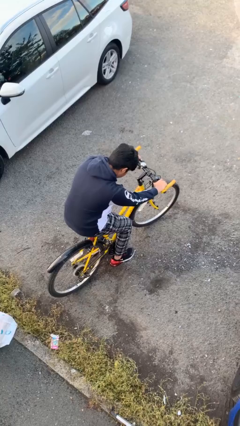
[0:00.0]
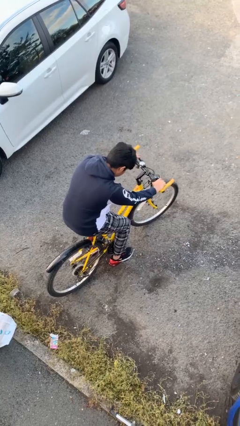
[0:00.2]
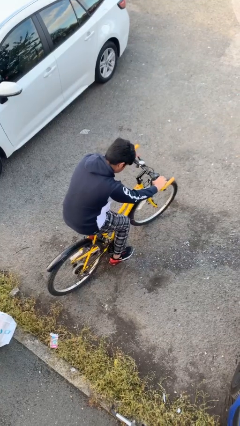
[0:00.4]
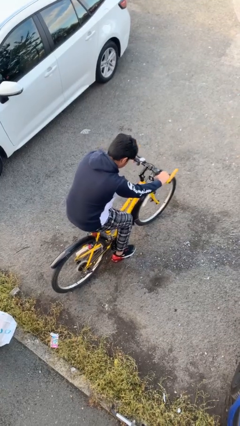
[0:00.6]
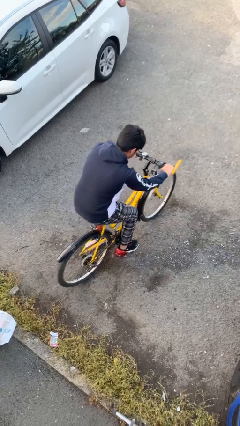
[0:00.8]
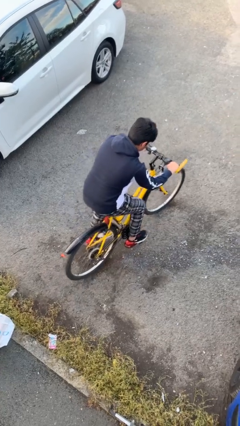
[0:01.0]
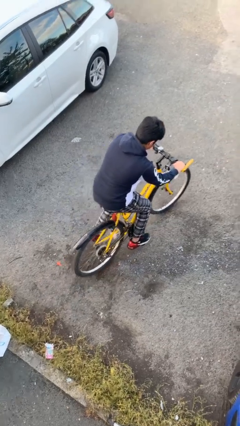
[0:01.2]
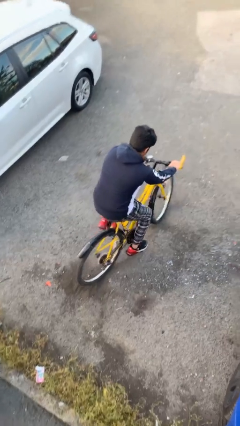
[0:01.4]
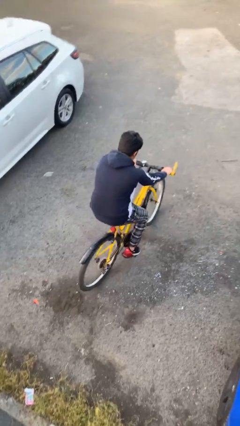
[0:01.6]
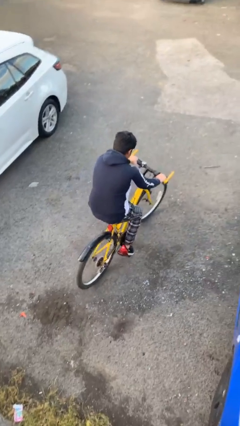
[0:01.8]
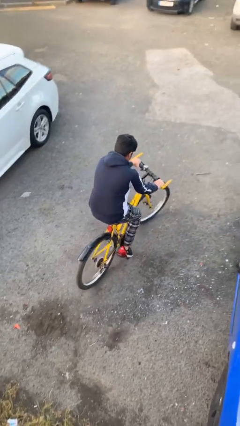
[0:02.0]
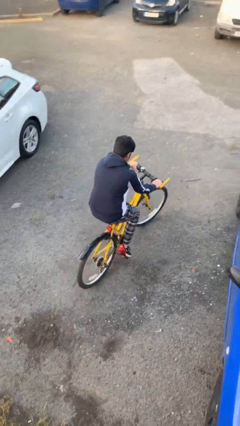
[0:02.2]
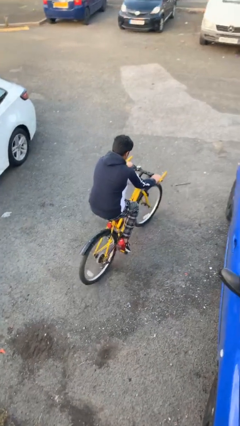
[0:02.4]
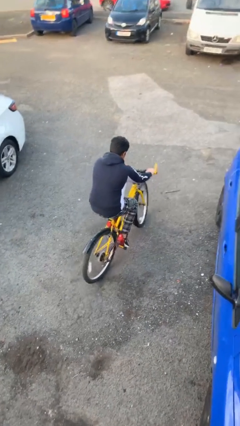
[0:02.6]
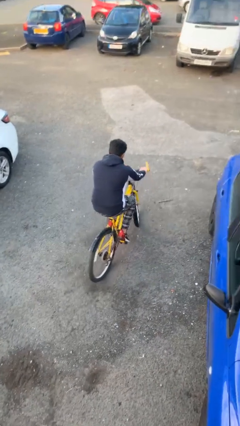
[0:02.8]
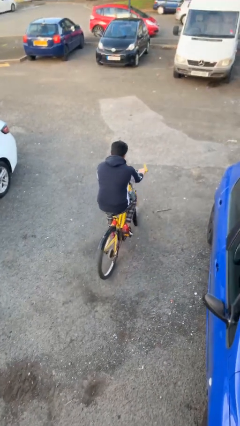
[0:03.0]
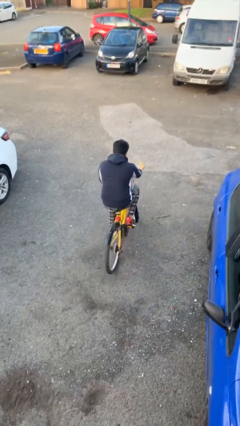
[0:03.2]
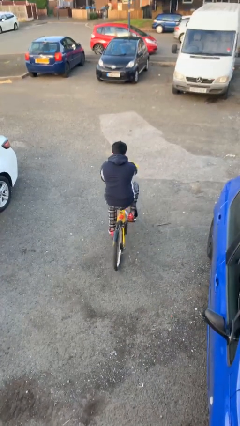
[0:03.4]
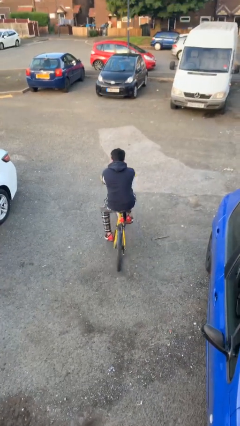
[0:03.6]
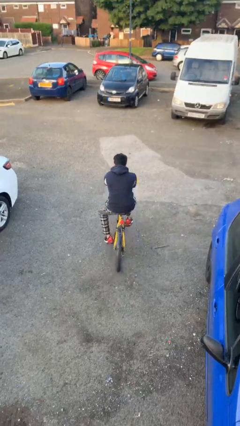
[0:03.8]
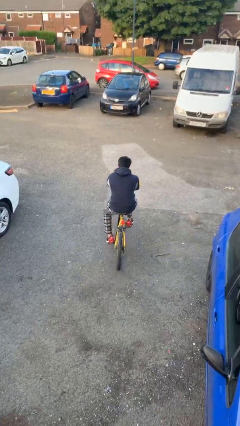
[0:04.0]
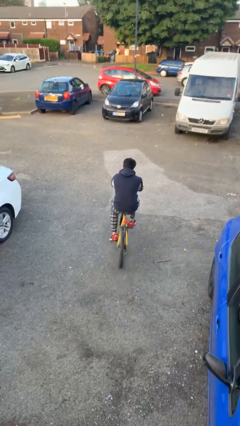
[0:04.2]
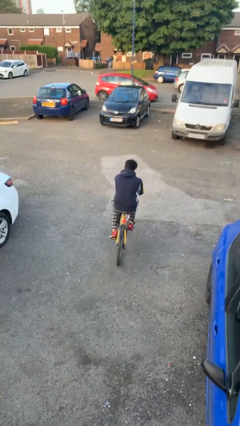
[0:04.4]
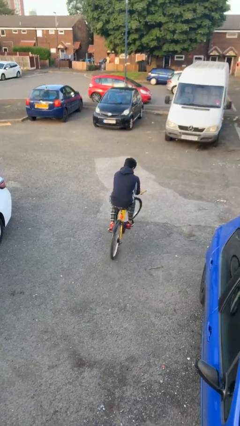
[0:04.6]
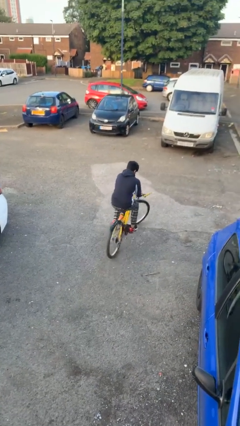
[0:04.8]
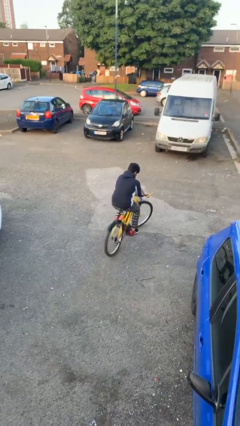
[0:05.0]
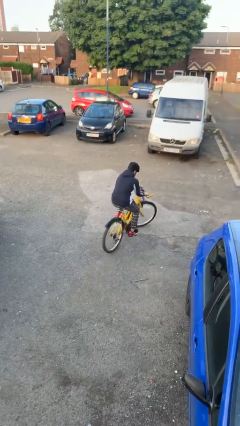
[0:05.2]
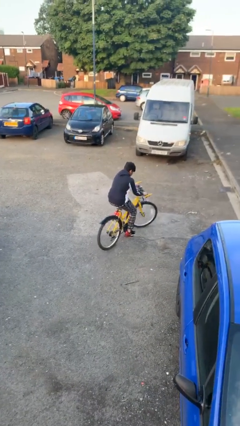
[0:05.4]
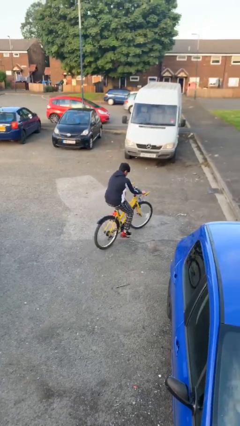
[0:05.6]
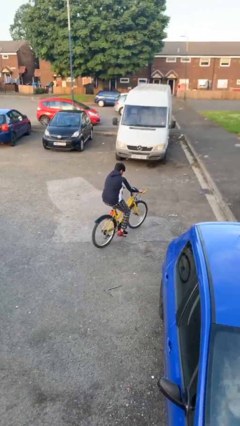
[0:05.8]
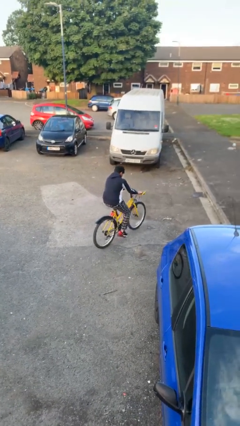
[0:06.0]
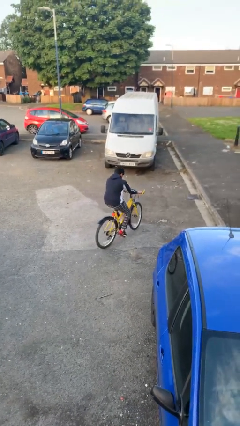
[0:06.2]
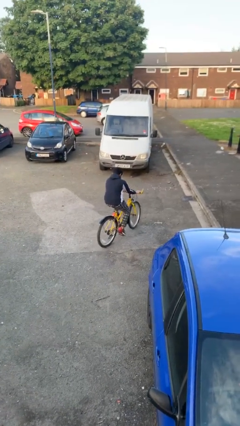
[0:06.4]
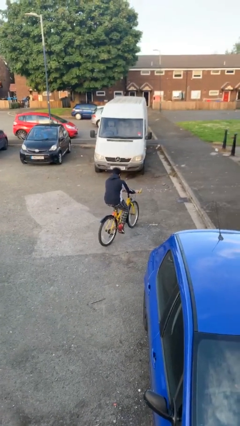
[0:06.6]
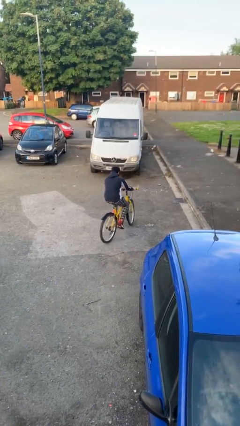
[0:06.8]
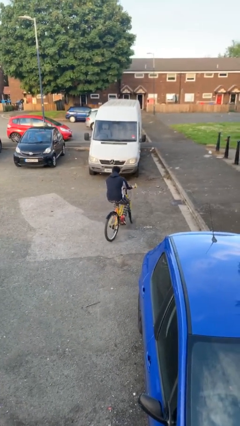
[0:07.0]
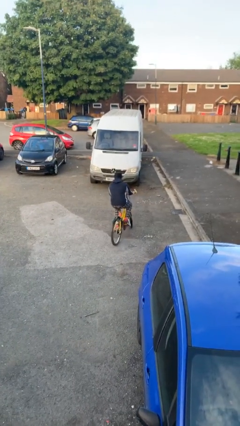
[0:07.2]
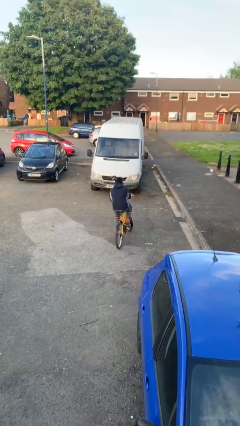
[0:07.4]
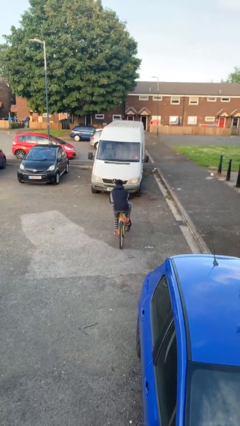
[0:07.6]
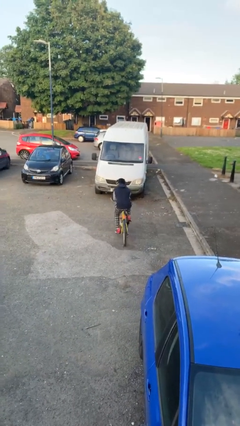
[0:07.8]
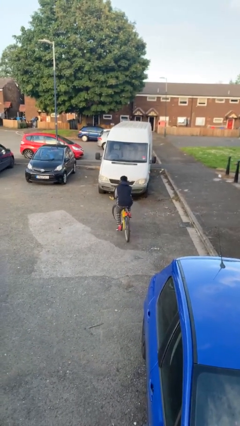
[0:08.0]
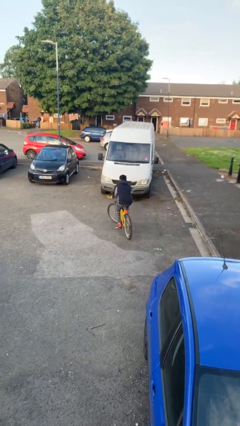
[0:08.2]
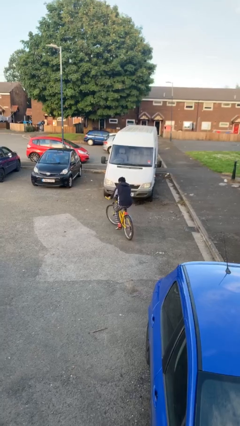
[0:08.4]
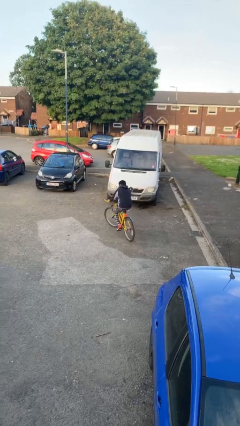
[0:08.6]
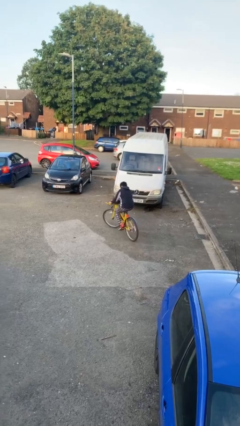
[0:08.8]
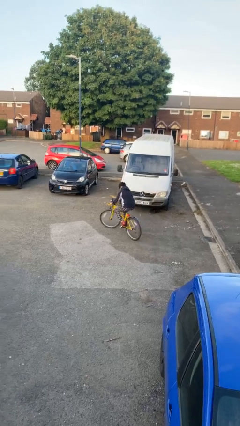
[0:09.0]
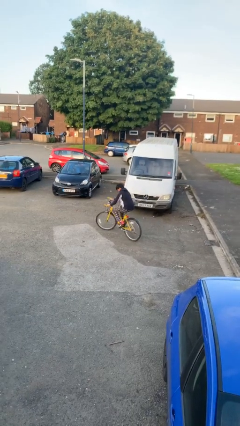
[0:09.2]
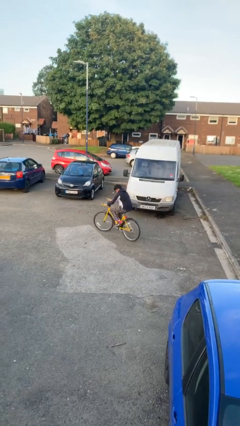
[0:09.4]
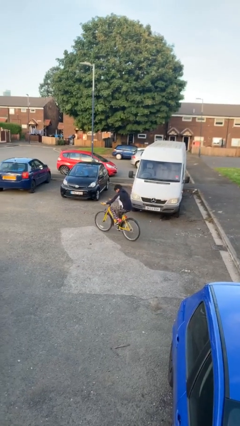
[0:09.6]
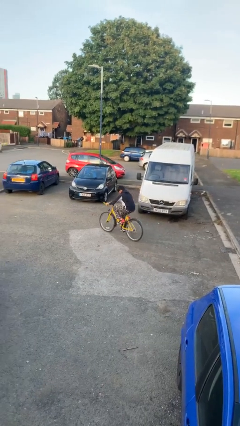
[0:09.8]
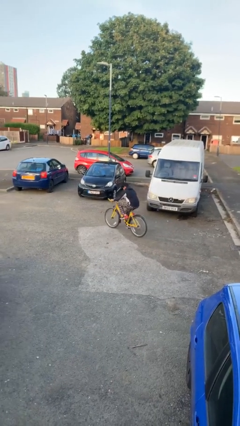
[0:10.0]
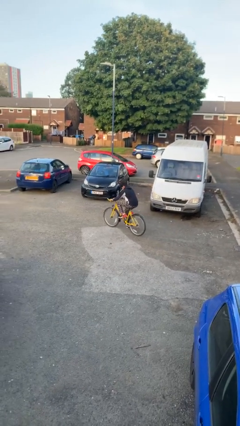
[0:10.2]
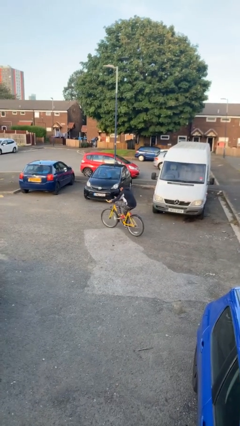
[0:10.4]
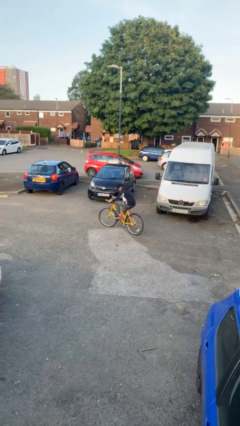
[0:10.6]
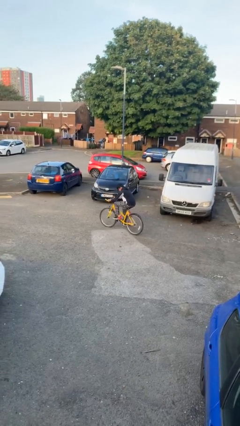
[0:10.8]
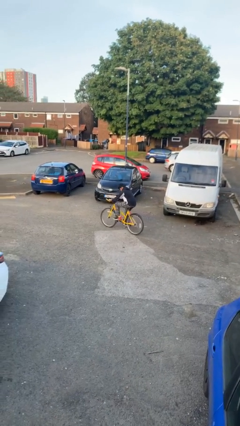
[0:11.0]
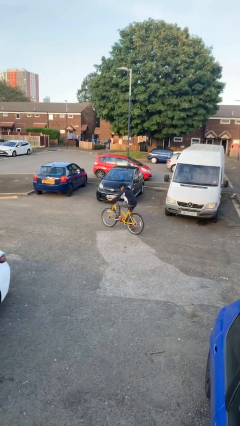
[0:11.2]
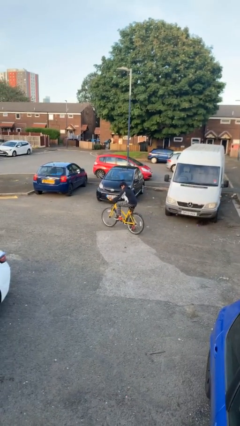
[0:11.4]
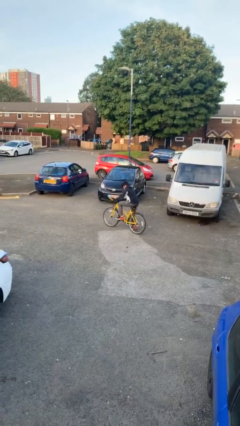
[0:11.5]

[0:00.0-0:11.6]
person rides bicycle

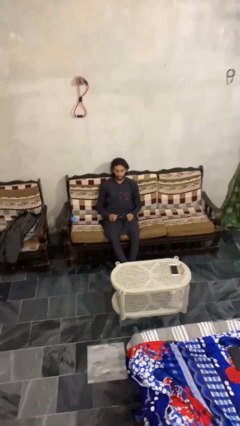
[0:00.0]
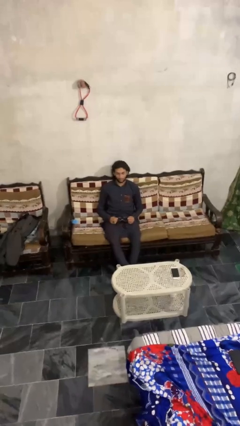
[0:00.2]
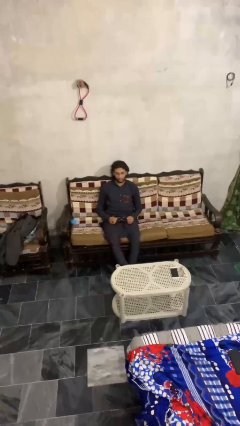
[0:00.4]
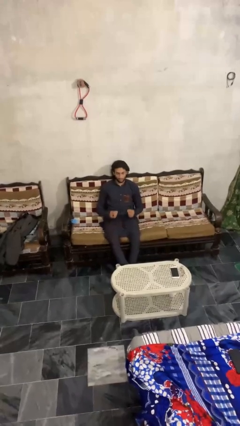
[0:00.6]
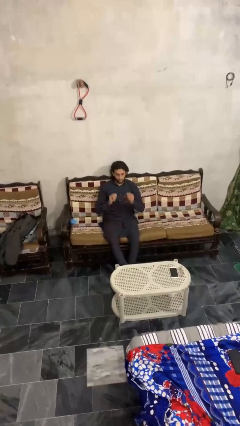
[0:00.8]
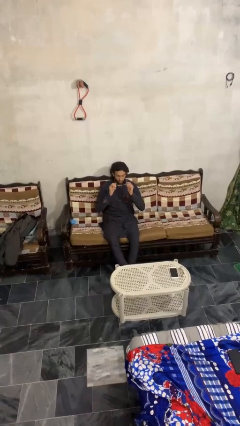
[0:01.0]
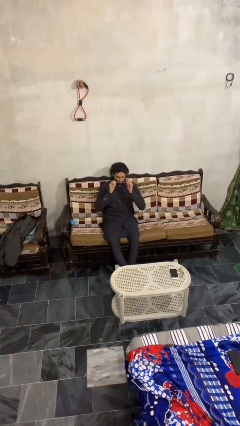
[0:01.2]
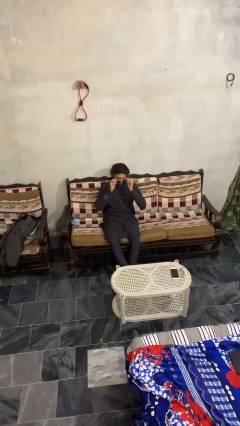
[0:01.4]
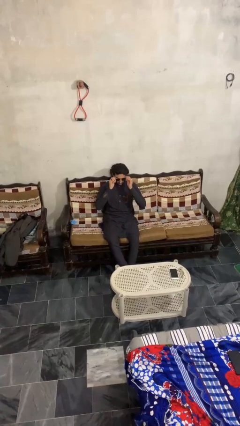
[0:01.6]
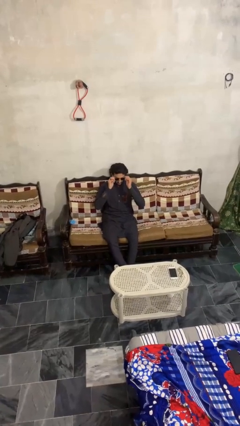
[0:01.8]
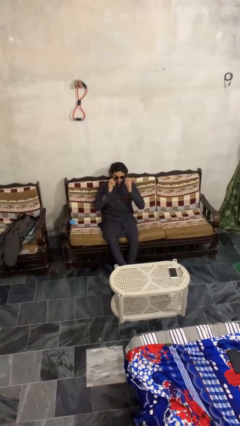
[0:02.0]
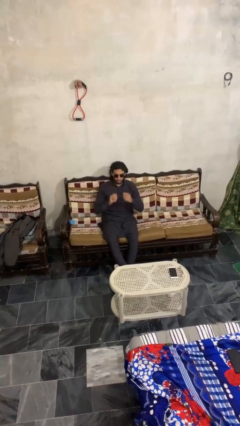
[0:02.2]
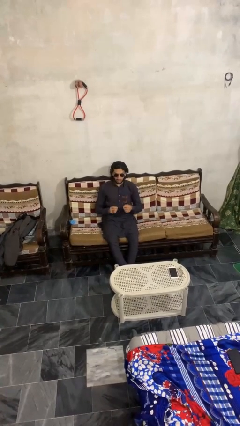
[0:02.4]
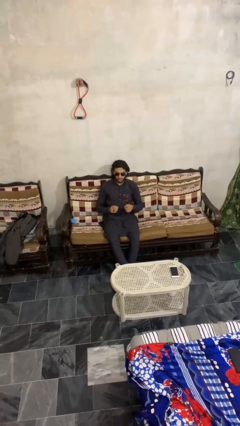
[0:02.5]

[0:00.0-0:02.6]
person puts on sunglasses

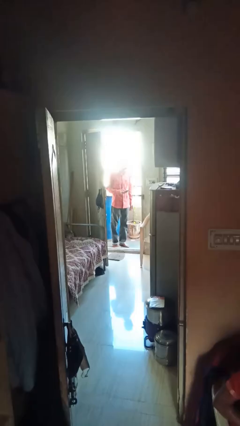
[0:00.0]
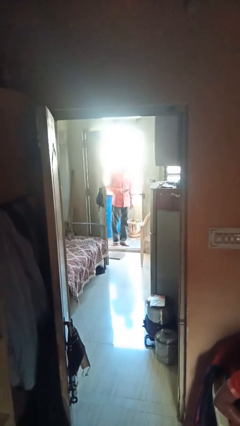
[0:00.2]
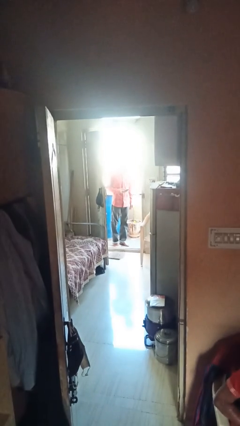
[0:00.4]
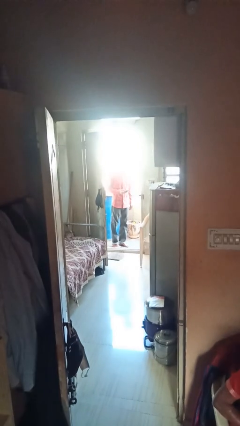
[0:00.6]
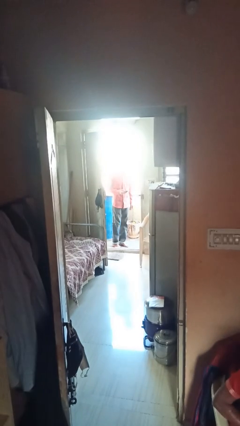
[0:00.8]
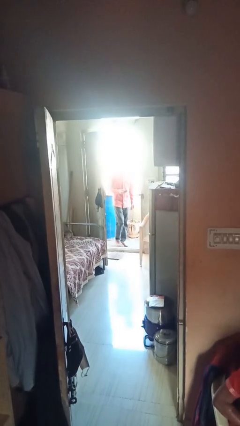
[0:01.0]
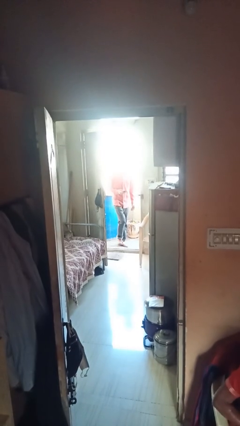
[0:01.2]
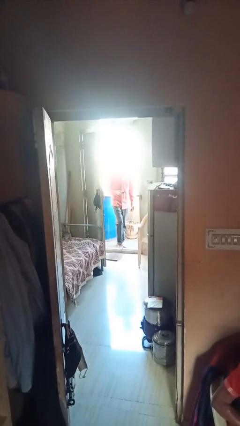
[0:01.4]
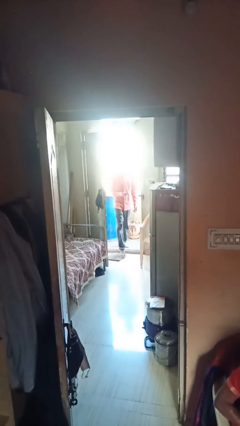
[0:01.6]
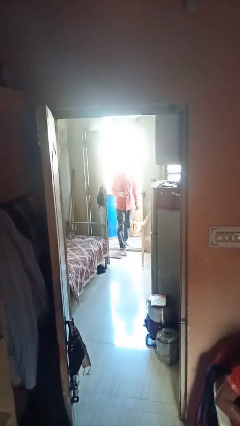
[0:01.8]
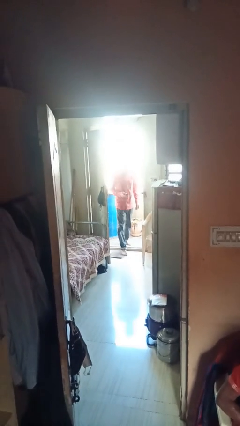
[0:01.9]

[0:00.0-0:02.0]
person enters scene through structure

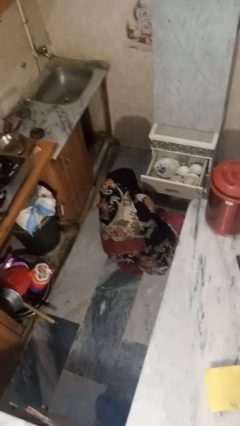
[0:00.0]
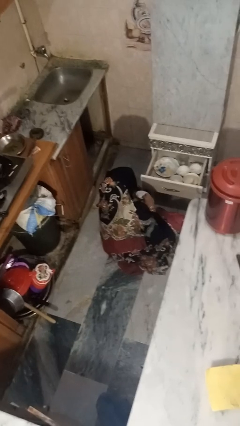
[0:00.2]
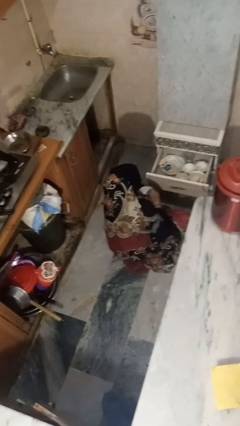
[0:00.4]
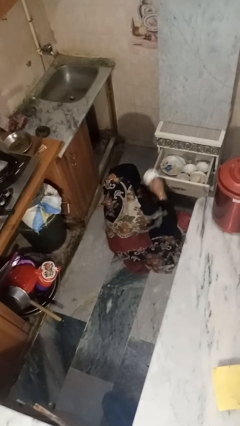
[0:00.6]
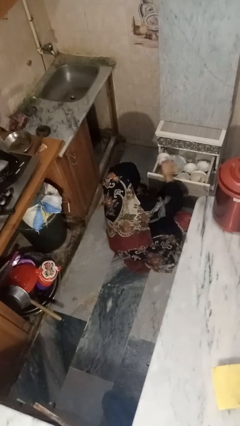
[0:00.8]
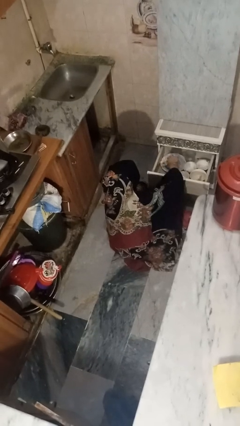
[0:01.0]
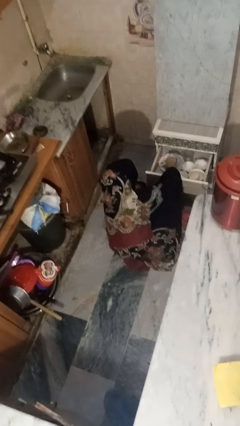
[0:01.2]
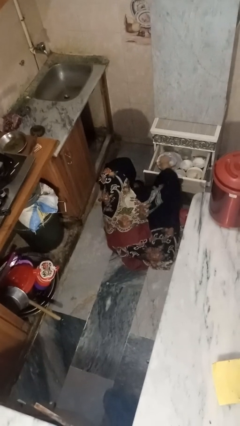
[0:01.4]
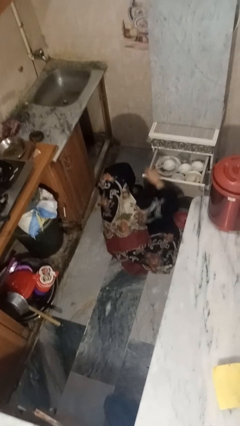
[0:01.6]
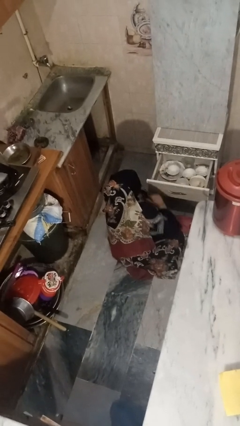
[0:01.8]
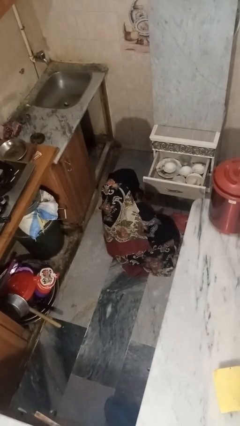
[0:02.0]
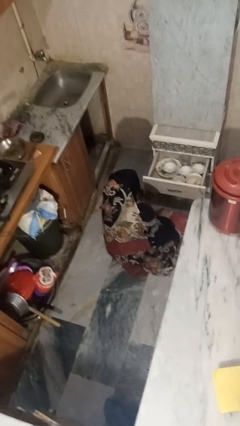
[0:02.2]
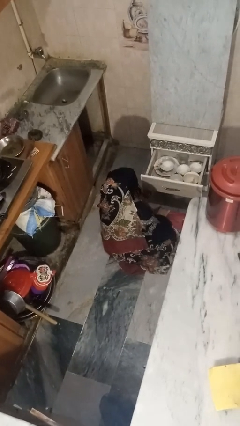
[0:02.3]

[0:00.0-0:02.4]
person puts object into kitchen drawer
